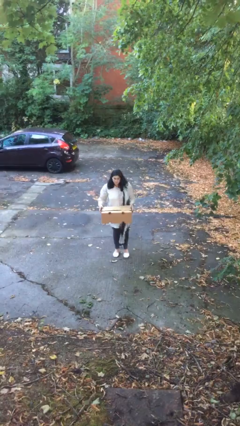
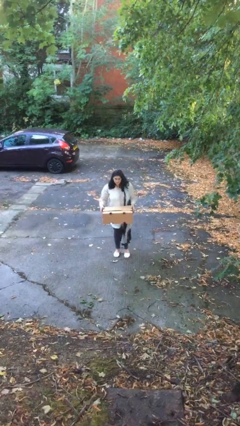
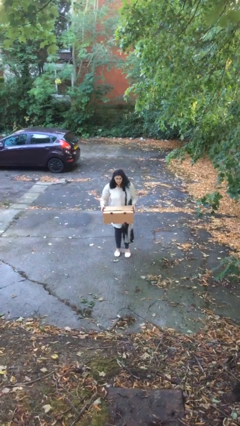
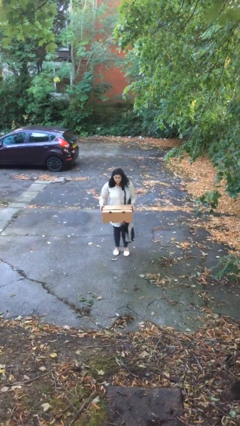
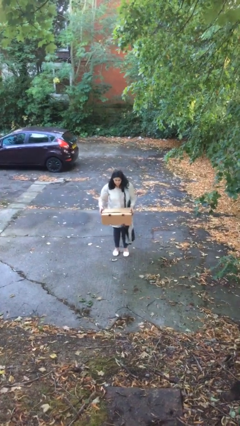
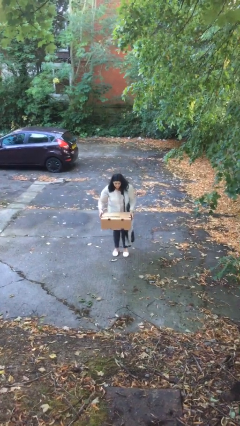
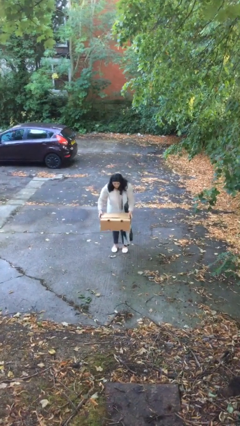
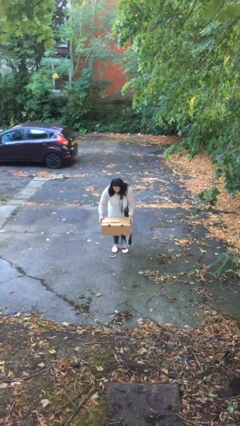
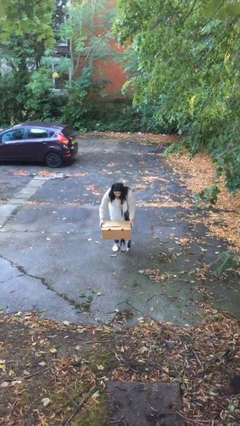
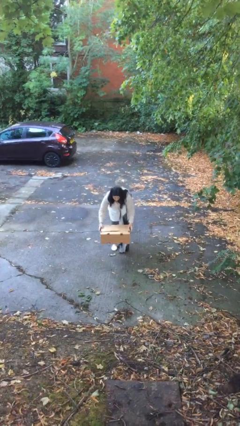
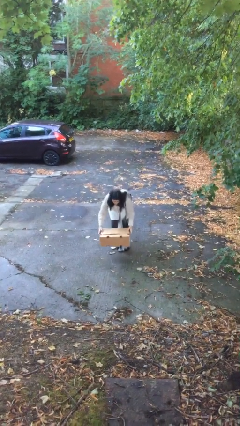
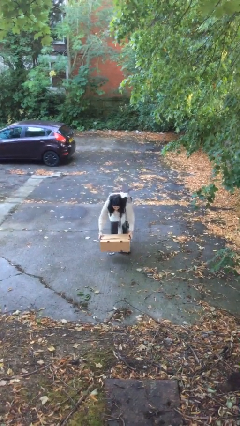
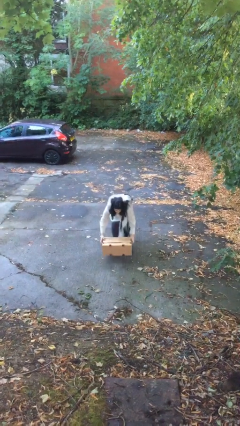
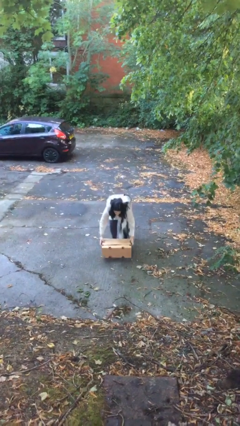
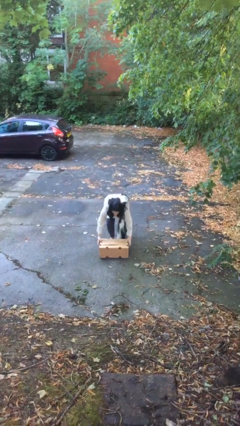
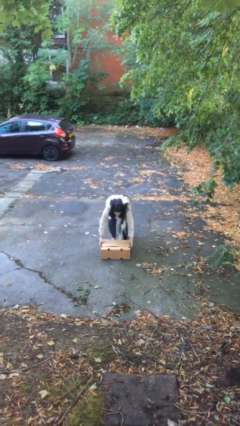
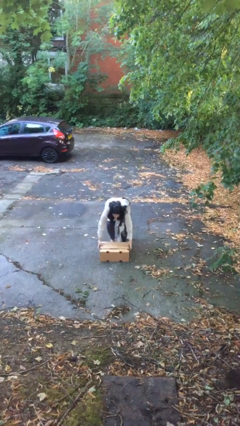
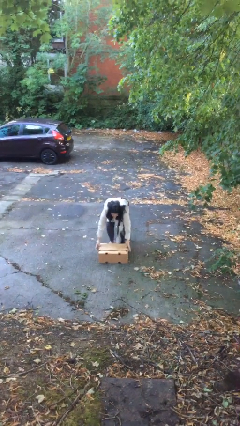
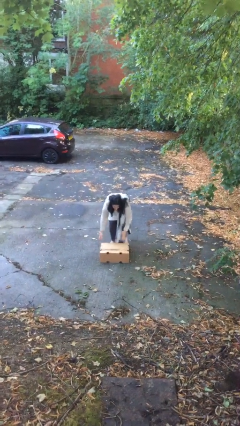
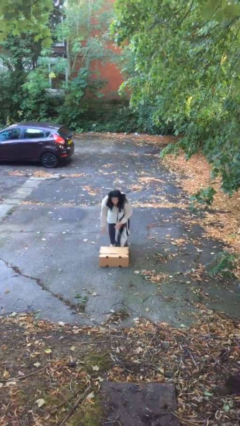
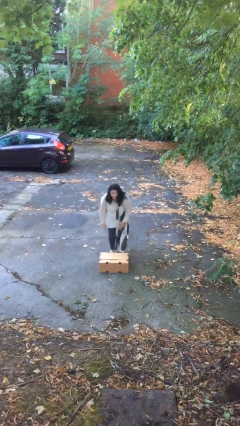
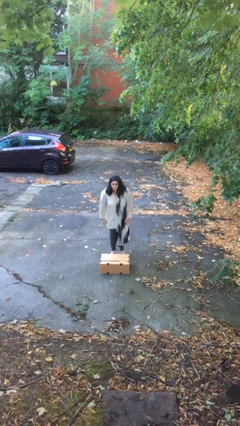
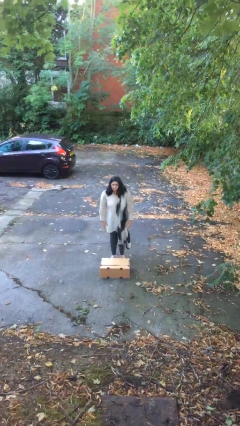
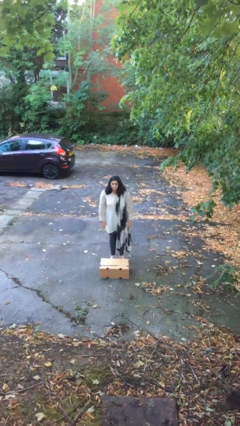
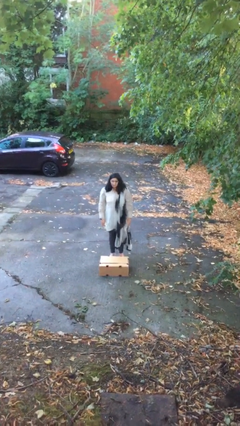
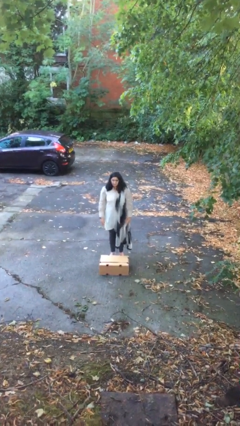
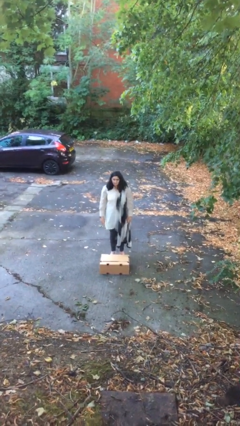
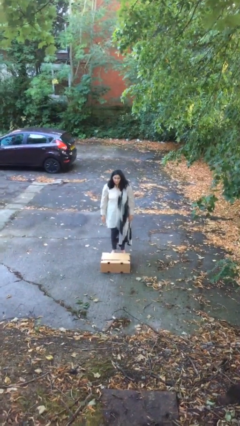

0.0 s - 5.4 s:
person puts down object on floor

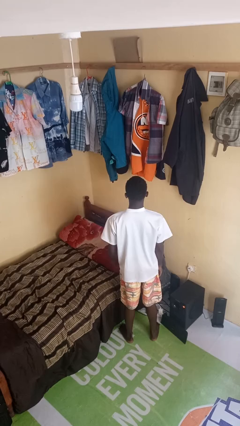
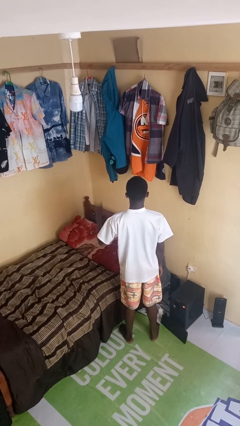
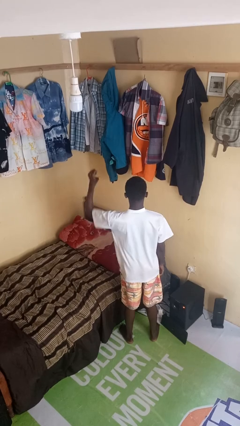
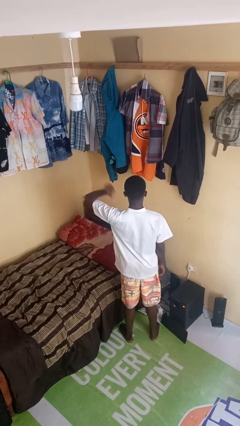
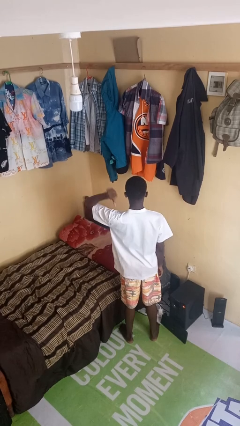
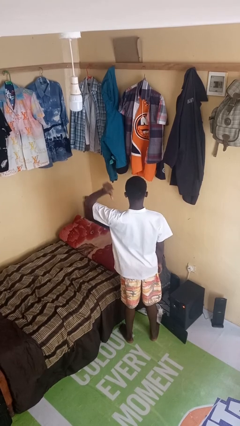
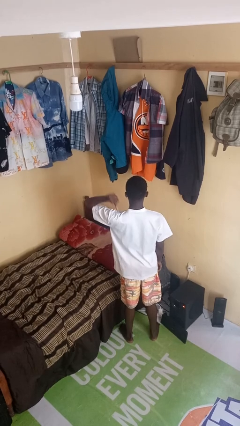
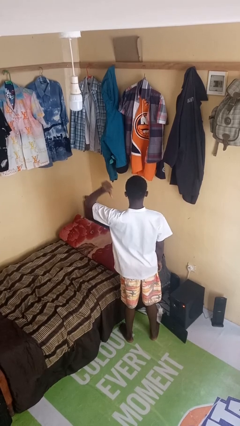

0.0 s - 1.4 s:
person gestures behind me

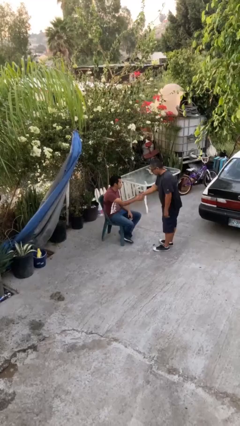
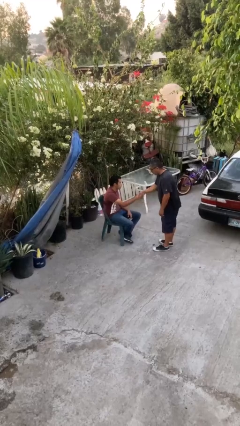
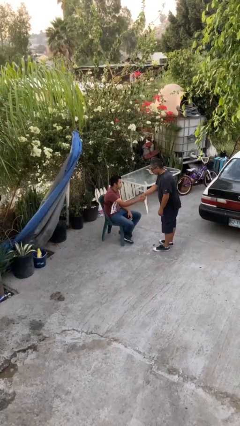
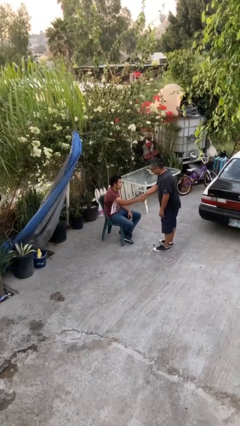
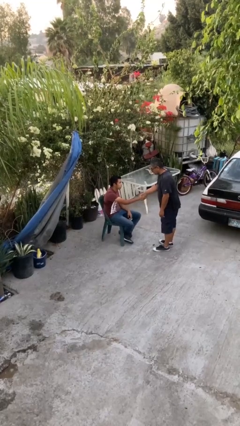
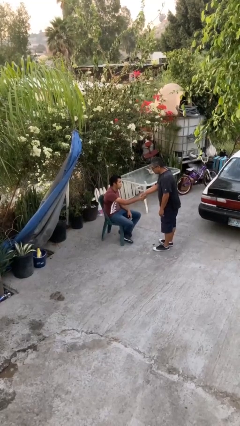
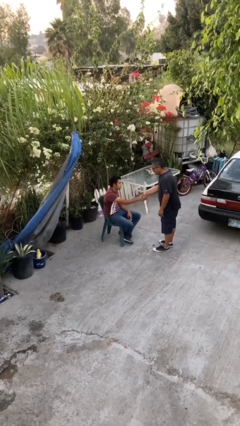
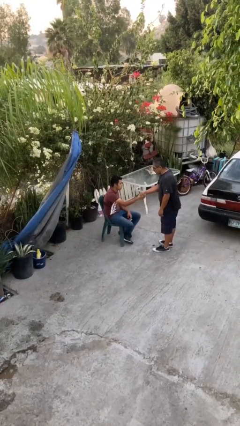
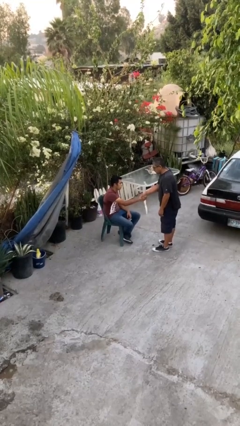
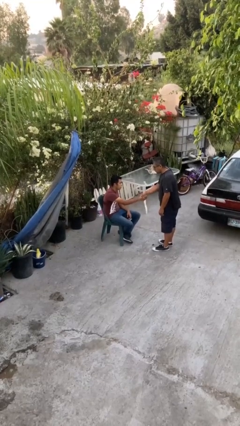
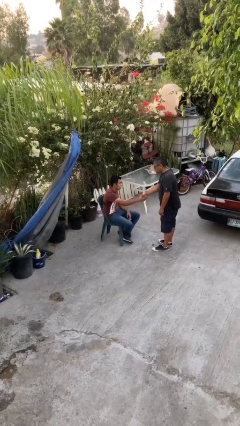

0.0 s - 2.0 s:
person shakes hand

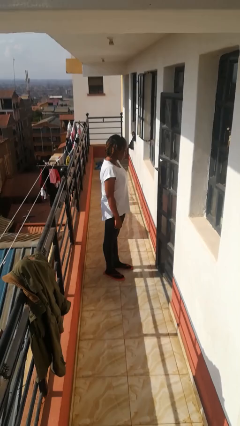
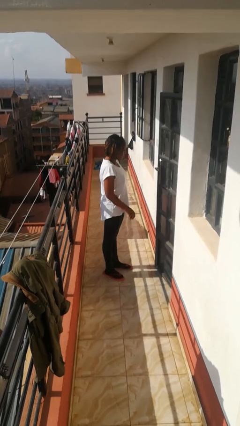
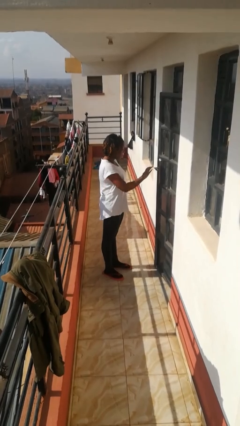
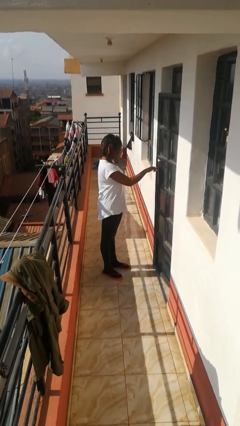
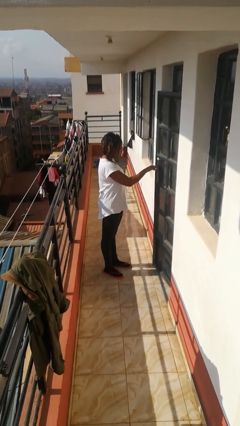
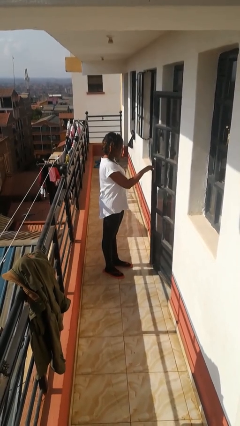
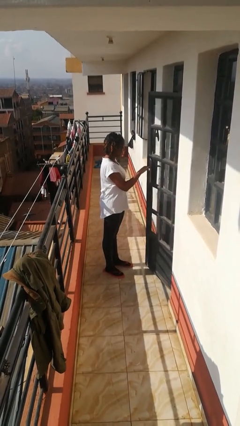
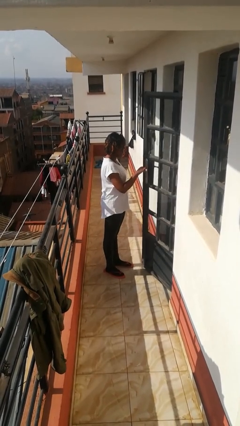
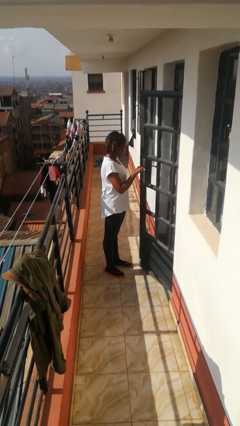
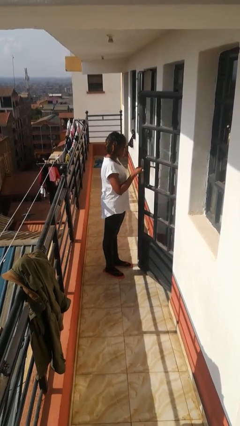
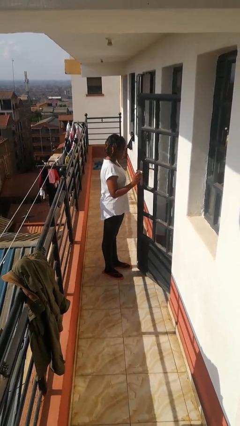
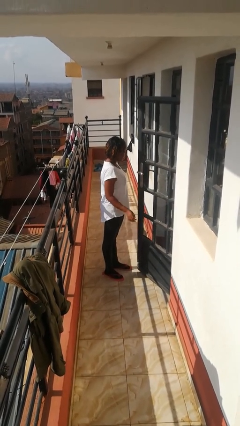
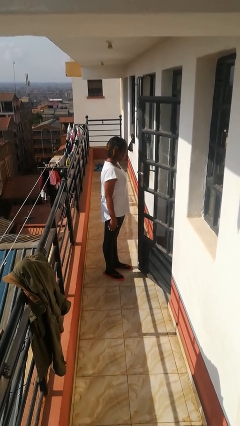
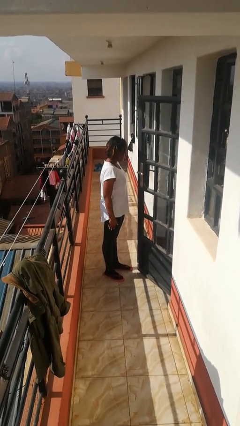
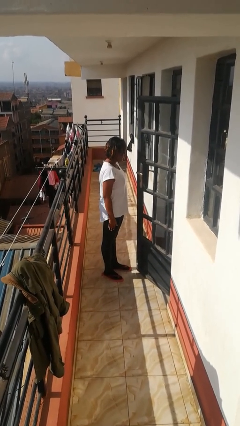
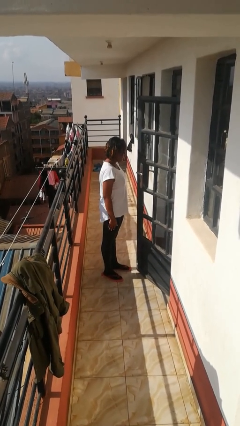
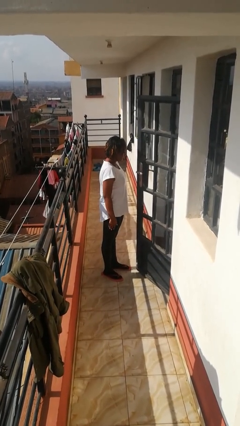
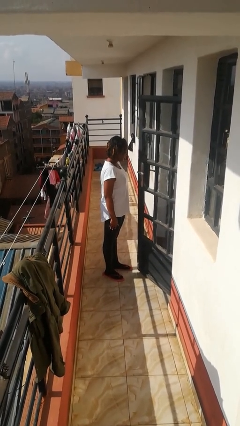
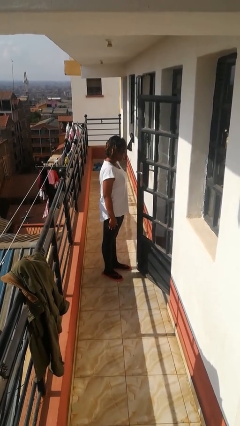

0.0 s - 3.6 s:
person opens facility door

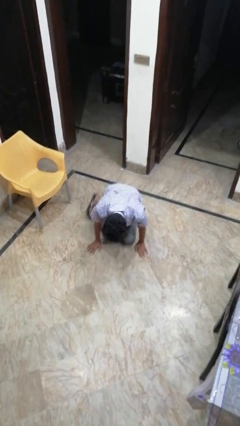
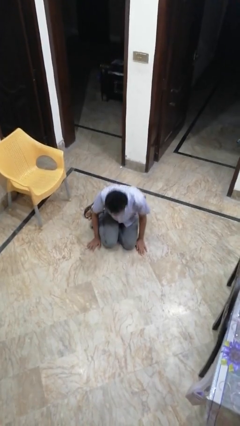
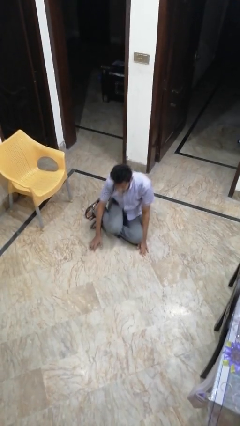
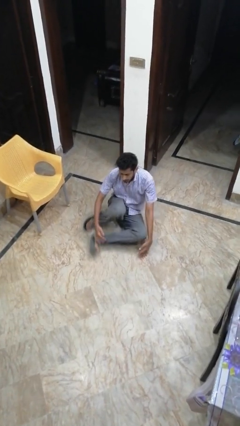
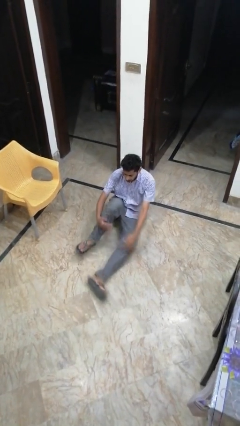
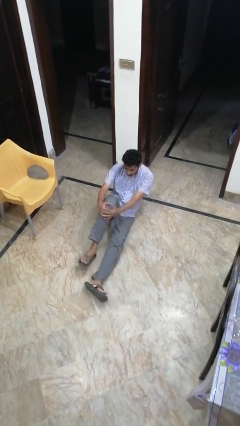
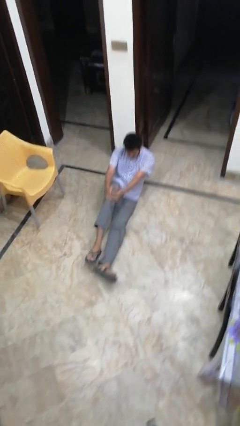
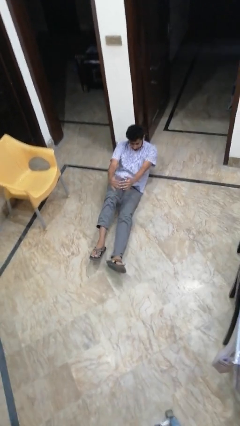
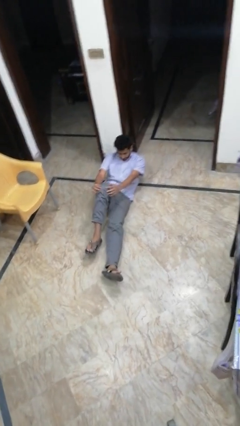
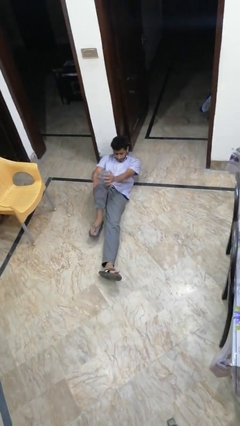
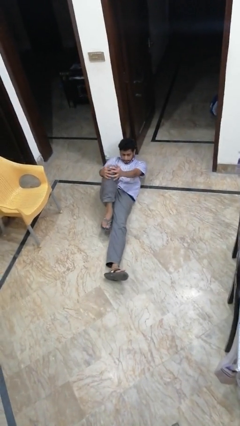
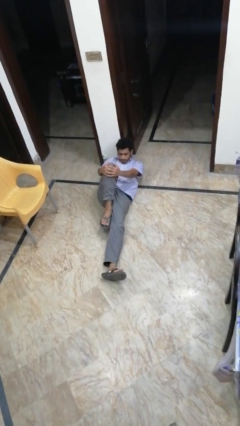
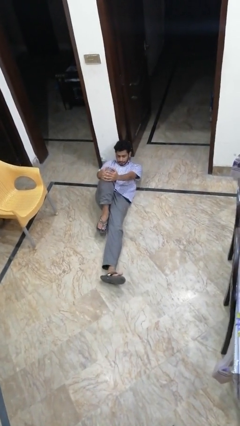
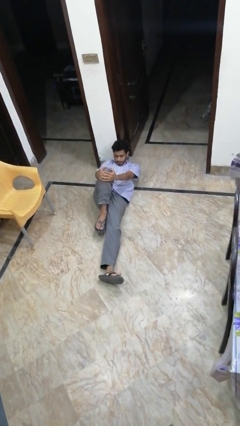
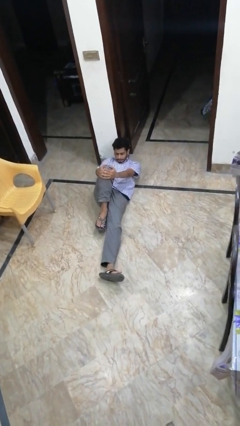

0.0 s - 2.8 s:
person lies down on floor

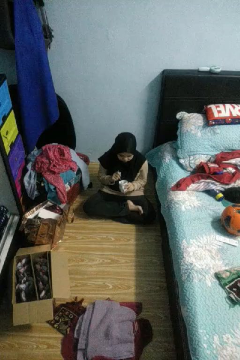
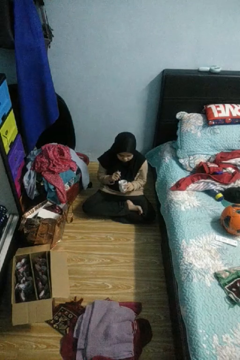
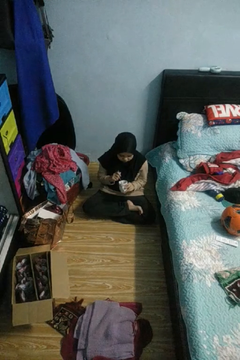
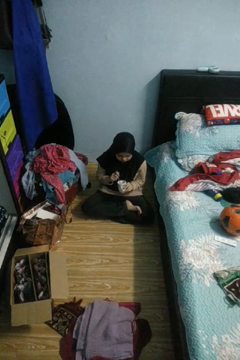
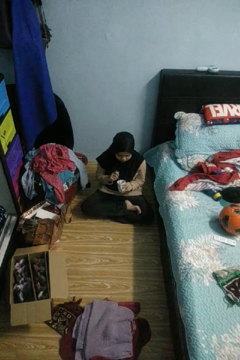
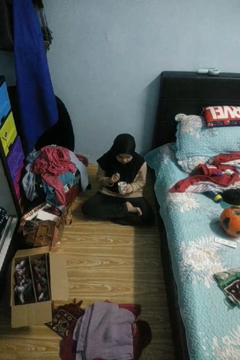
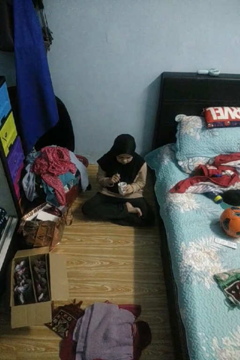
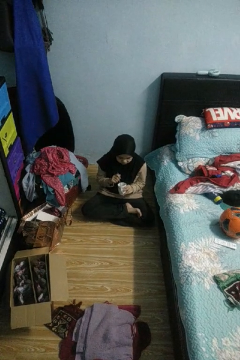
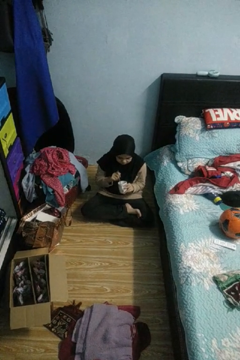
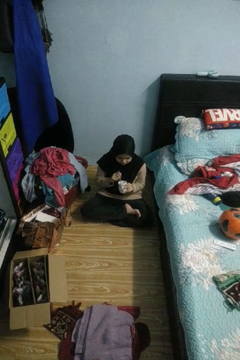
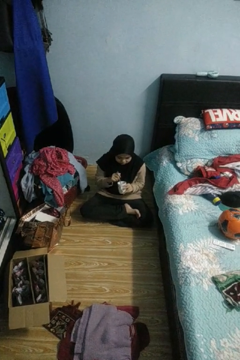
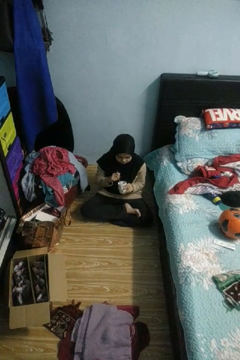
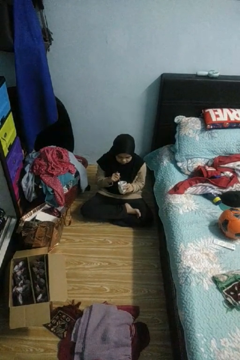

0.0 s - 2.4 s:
person stirs mug

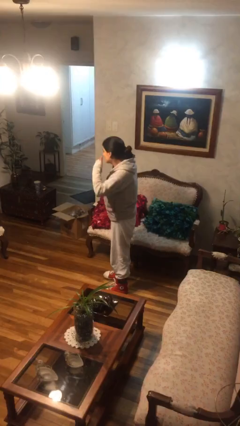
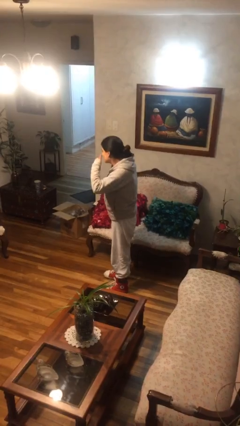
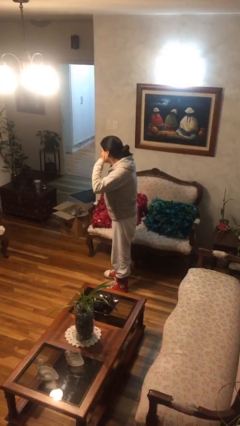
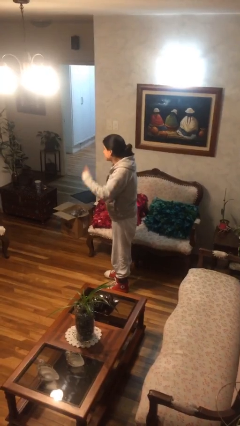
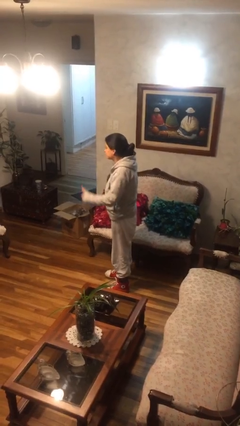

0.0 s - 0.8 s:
person gestures call me
